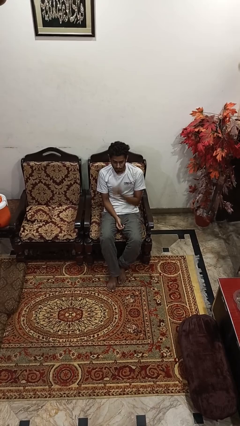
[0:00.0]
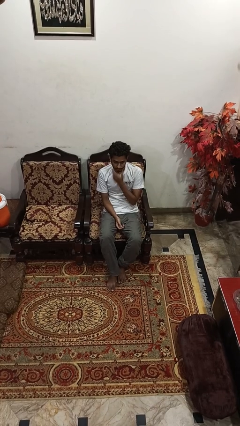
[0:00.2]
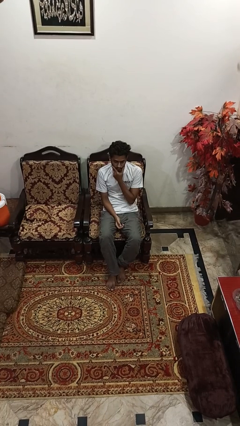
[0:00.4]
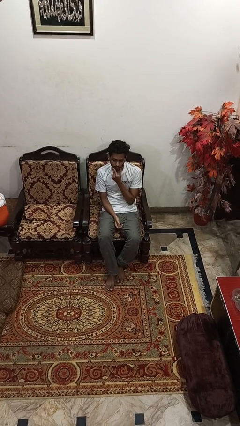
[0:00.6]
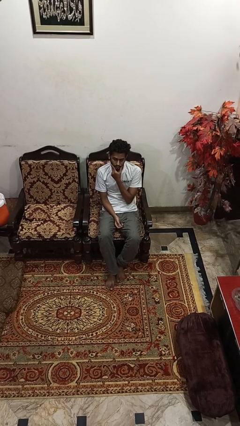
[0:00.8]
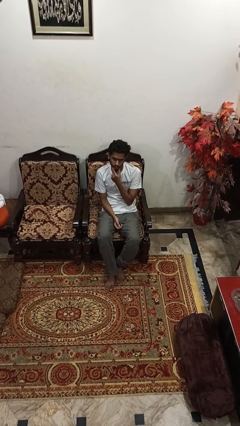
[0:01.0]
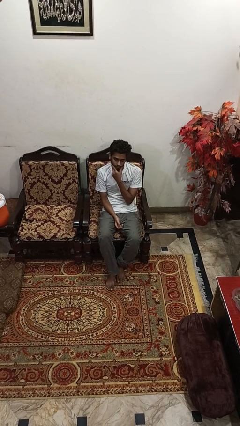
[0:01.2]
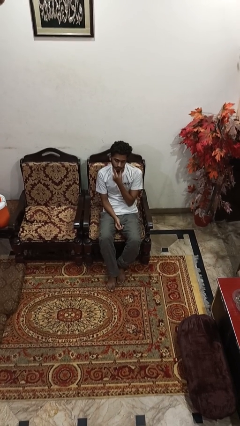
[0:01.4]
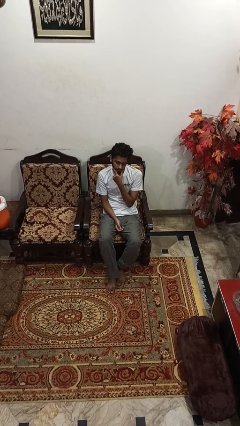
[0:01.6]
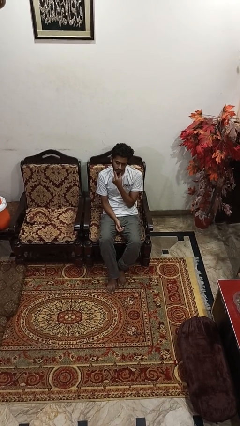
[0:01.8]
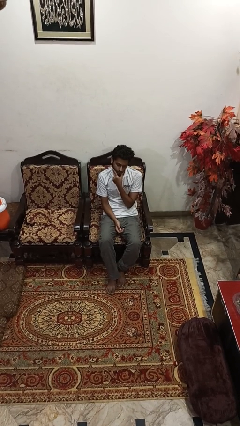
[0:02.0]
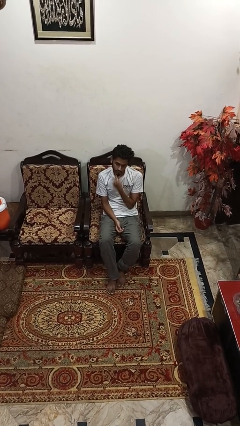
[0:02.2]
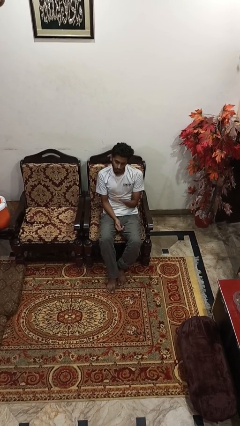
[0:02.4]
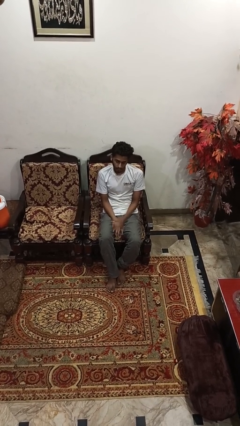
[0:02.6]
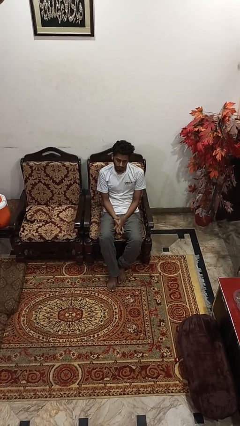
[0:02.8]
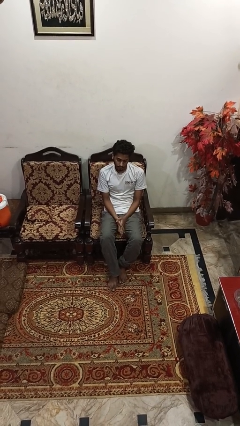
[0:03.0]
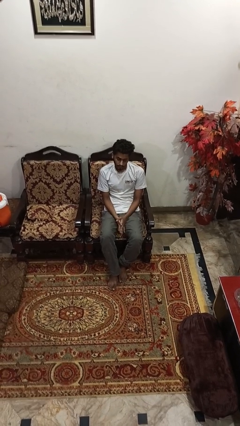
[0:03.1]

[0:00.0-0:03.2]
person strokes chin

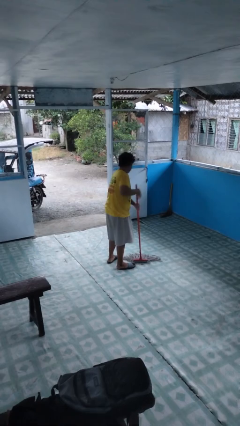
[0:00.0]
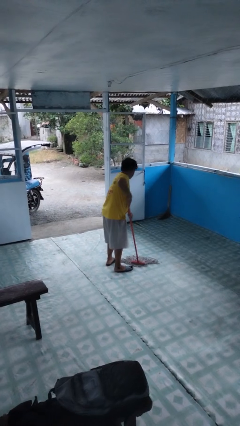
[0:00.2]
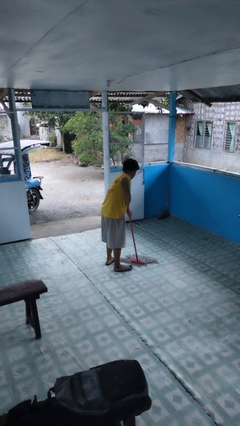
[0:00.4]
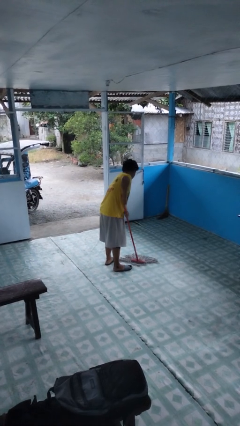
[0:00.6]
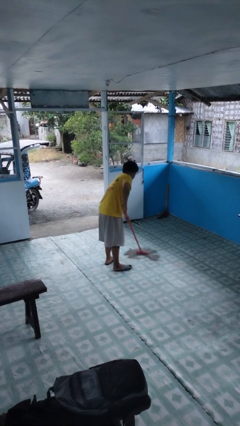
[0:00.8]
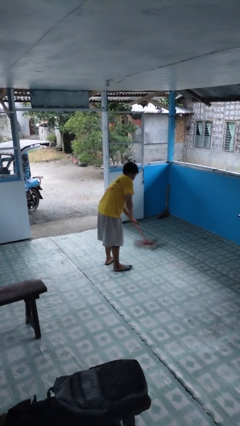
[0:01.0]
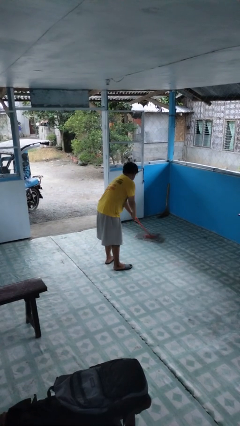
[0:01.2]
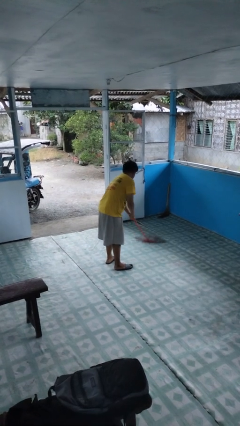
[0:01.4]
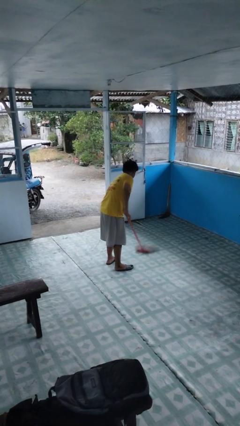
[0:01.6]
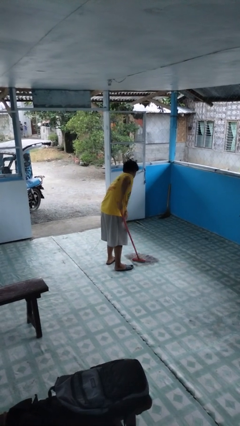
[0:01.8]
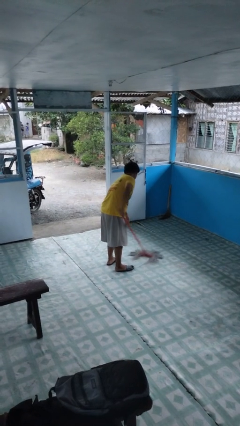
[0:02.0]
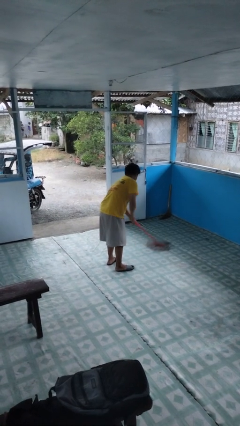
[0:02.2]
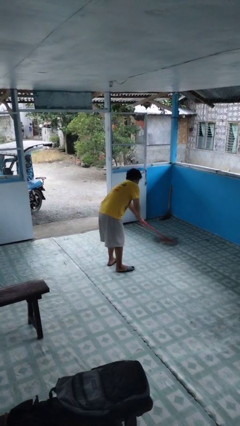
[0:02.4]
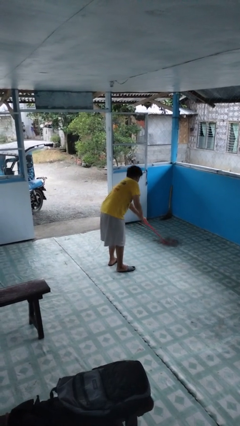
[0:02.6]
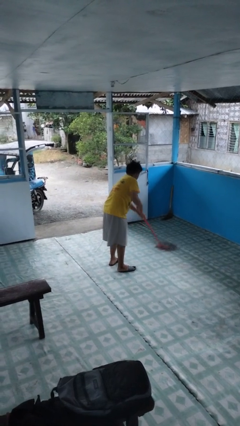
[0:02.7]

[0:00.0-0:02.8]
person mops

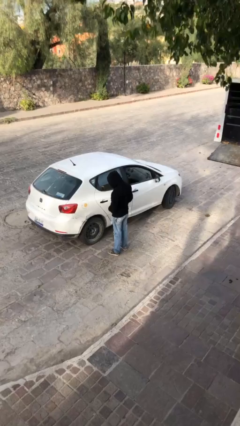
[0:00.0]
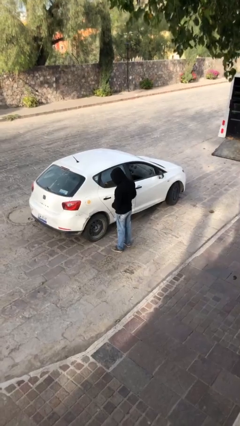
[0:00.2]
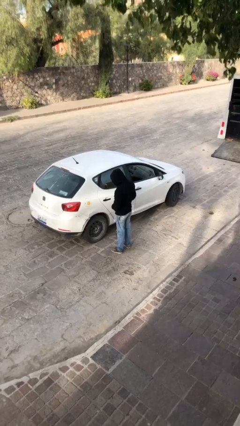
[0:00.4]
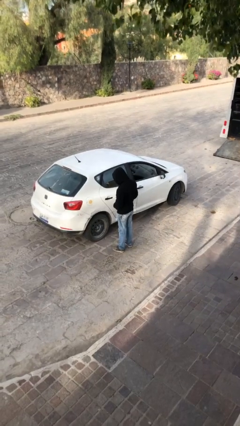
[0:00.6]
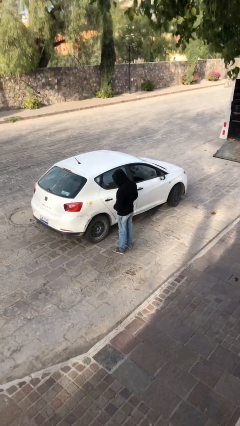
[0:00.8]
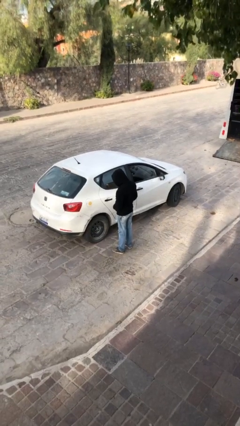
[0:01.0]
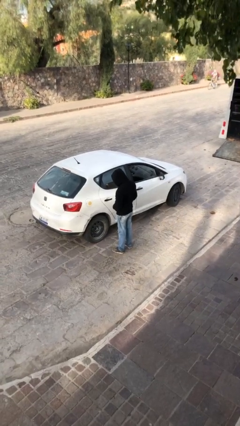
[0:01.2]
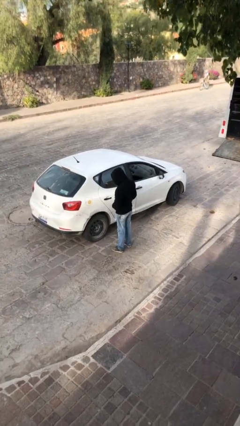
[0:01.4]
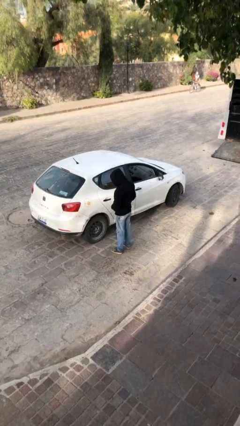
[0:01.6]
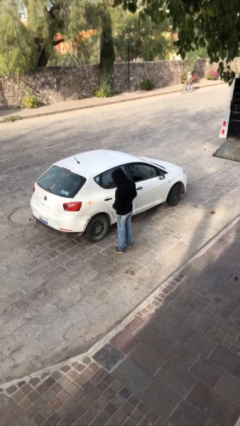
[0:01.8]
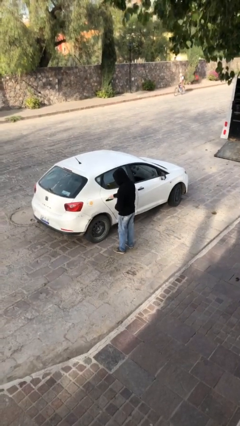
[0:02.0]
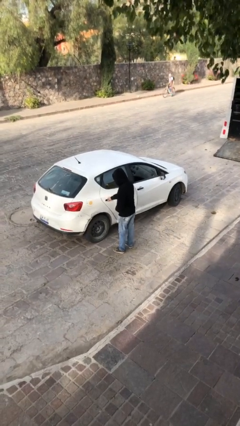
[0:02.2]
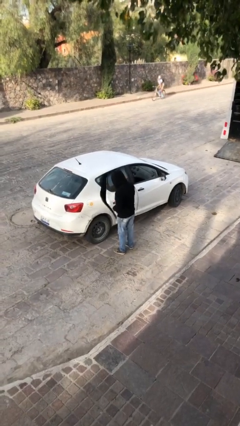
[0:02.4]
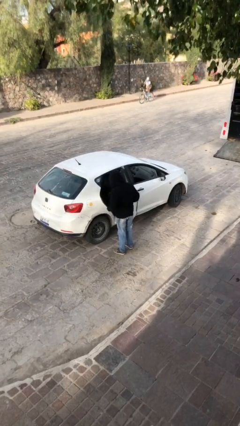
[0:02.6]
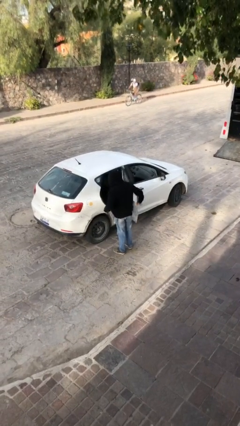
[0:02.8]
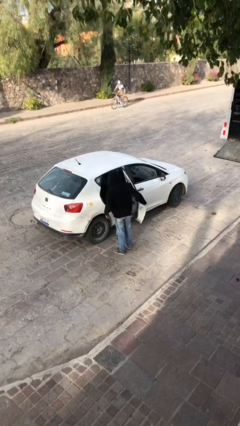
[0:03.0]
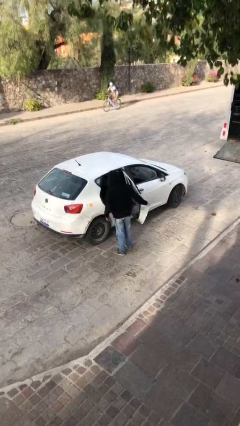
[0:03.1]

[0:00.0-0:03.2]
person opens car door

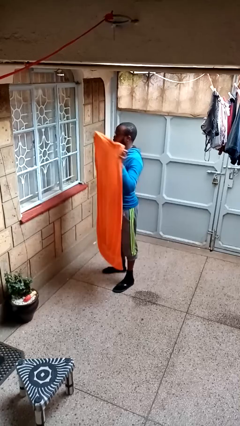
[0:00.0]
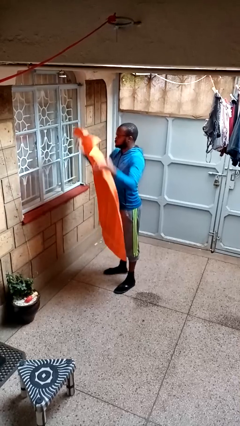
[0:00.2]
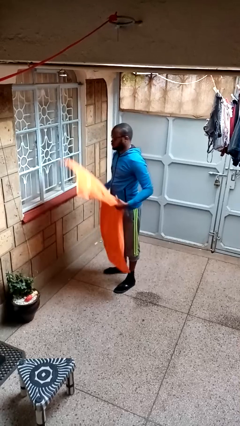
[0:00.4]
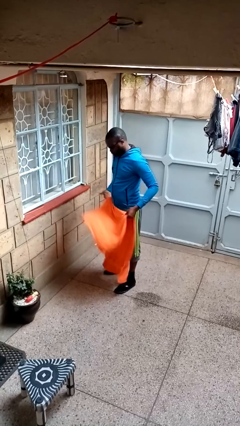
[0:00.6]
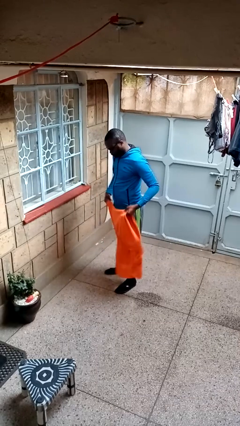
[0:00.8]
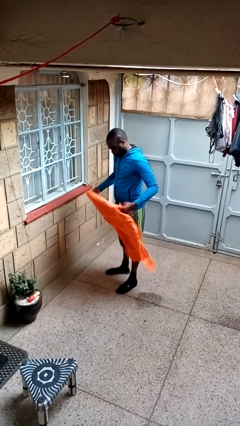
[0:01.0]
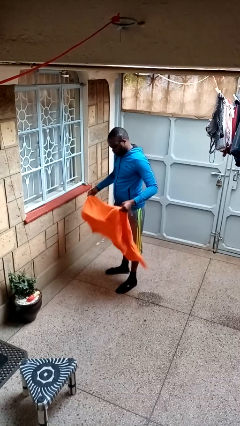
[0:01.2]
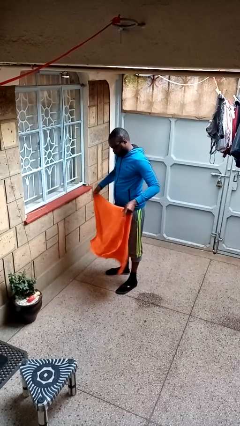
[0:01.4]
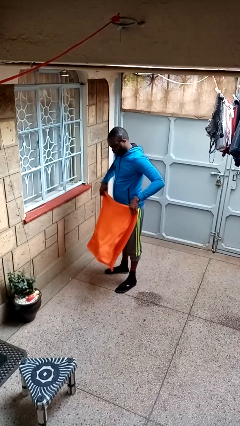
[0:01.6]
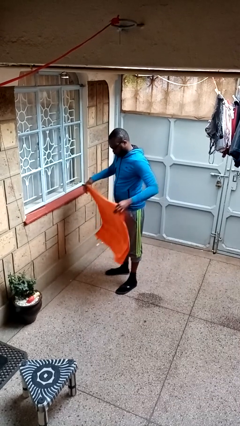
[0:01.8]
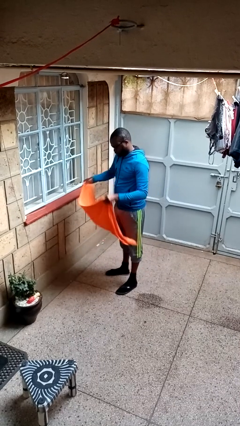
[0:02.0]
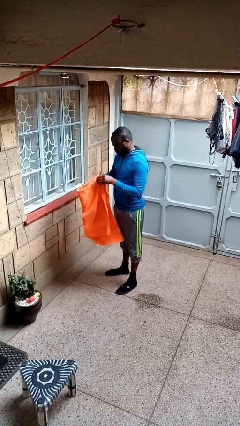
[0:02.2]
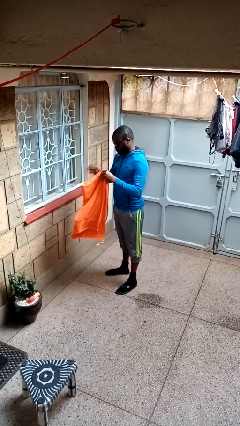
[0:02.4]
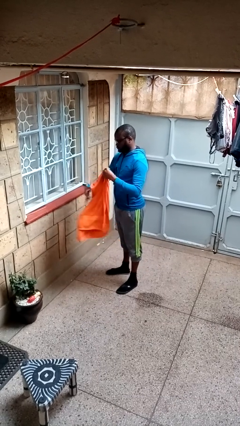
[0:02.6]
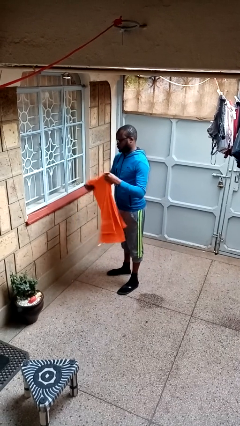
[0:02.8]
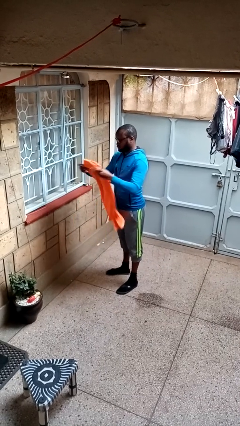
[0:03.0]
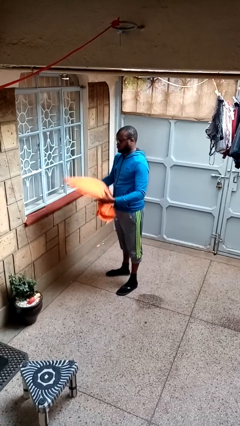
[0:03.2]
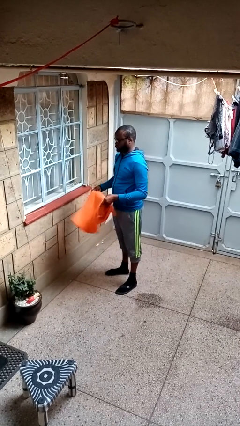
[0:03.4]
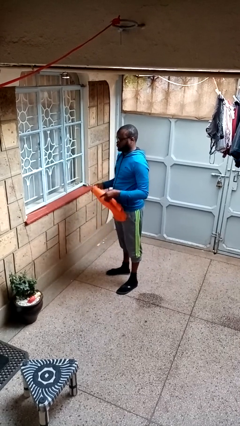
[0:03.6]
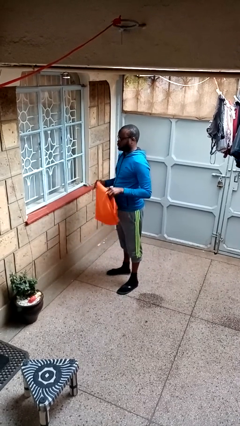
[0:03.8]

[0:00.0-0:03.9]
person folds towel

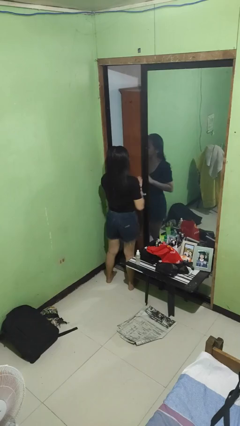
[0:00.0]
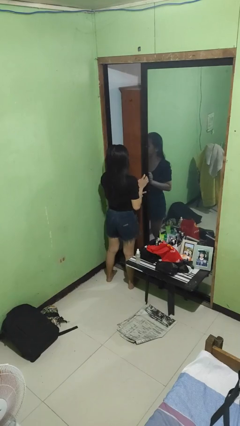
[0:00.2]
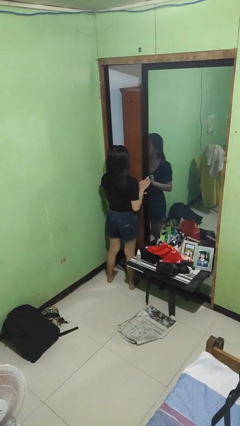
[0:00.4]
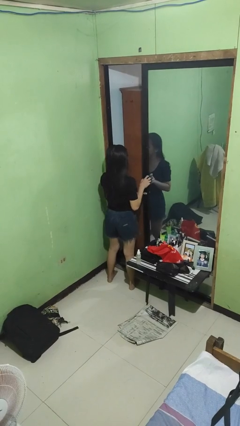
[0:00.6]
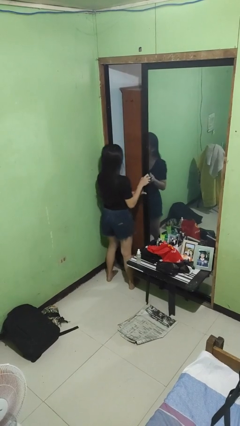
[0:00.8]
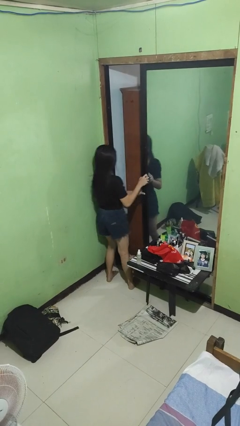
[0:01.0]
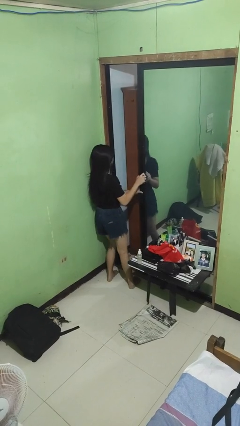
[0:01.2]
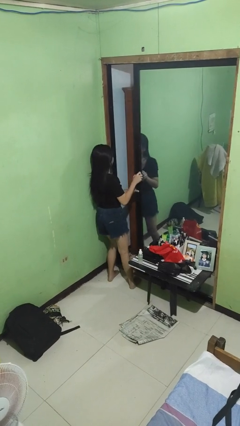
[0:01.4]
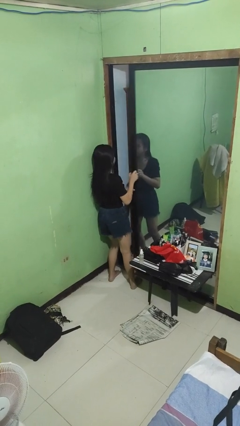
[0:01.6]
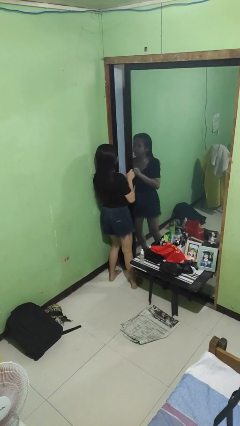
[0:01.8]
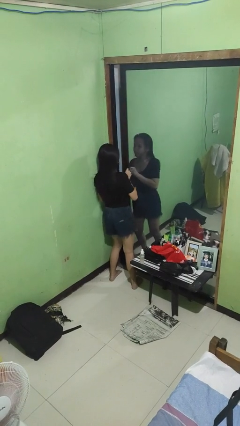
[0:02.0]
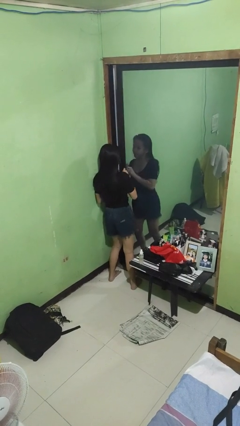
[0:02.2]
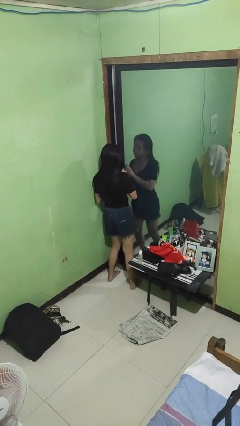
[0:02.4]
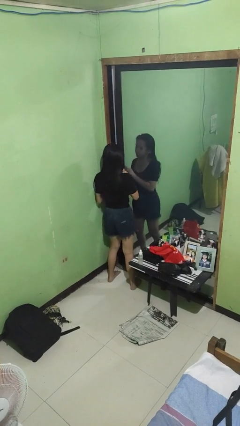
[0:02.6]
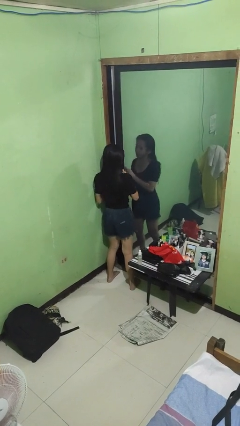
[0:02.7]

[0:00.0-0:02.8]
person closes sliding door

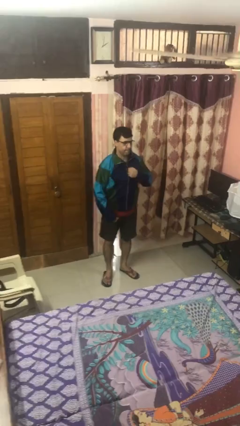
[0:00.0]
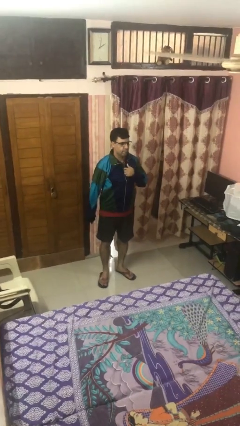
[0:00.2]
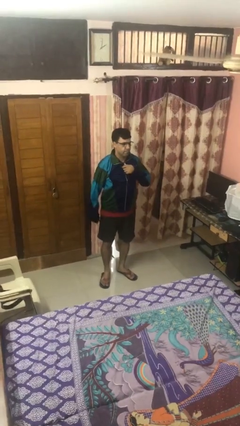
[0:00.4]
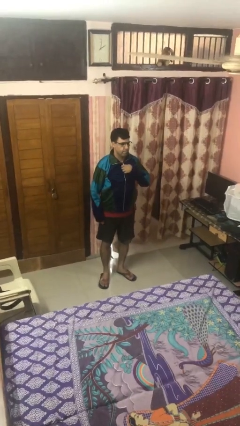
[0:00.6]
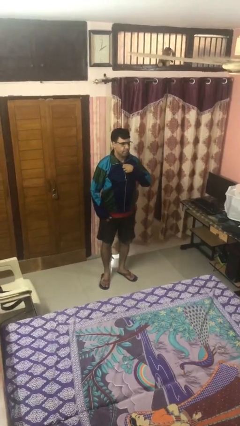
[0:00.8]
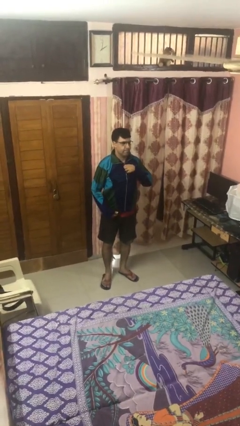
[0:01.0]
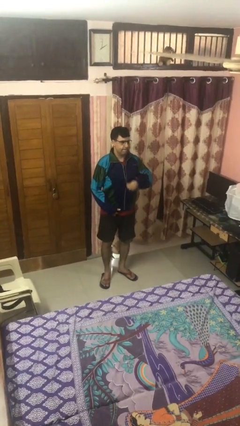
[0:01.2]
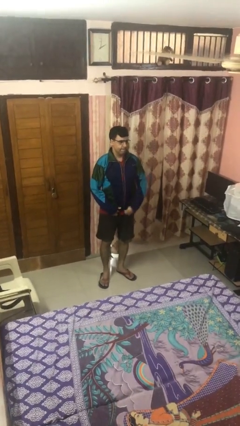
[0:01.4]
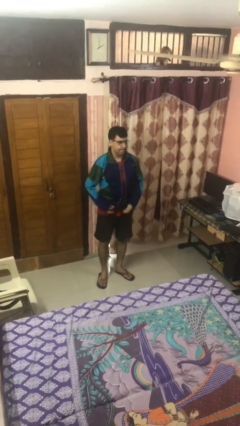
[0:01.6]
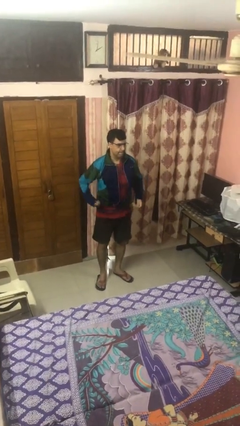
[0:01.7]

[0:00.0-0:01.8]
person unzips jacket
